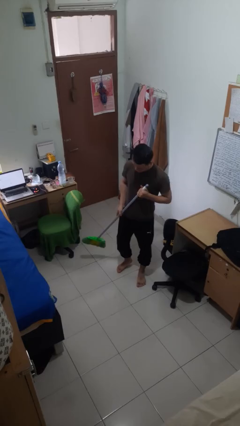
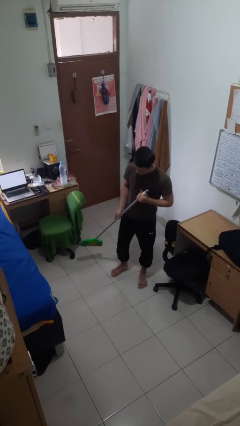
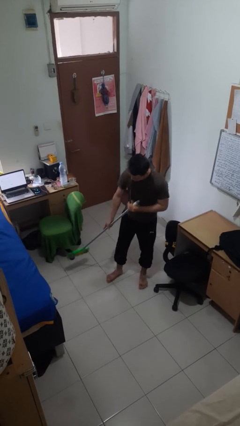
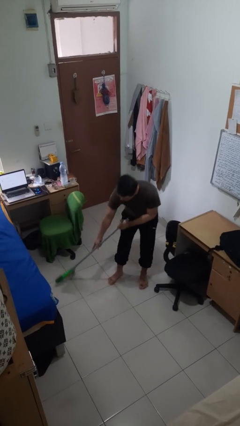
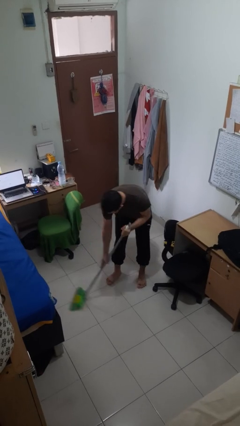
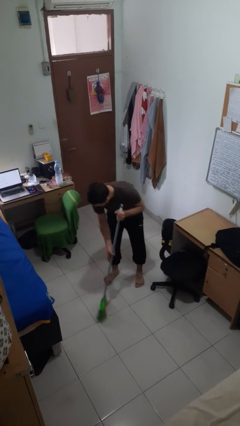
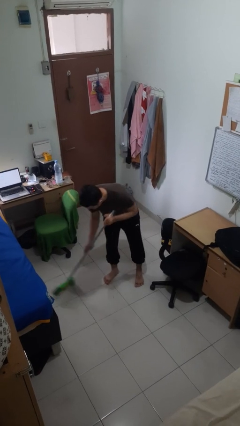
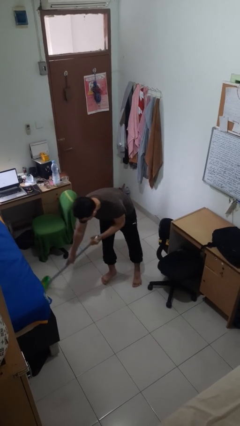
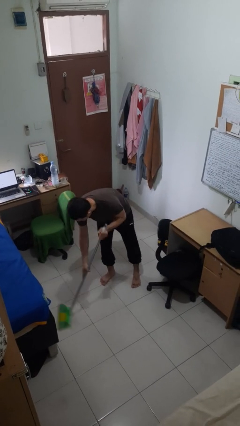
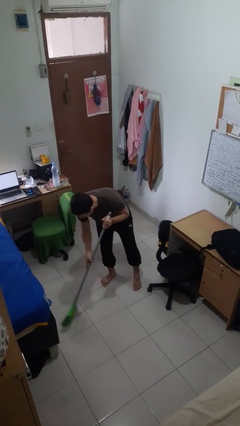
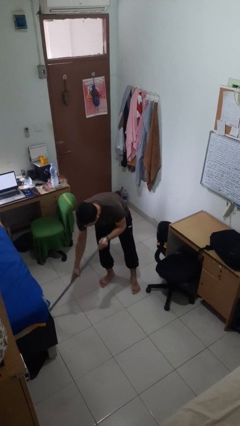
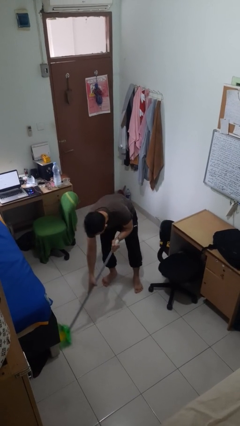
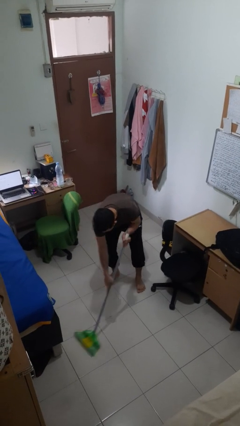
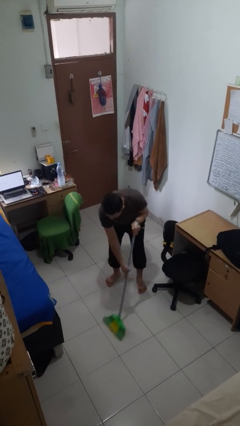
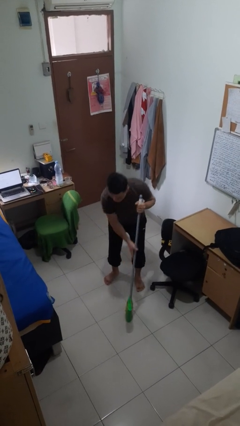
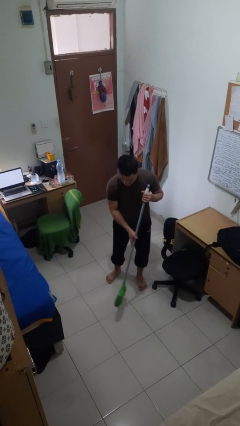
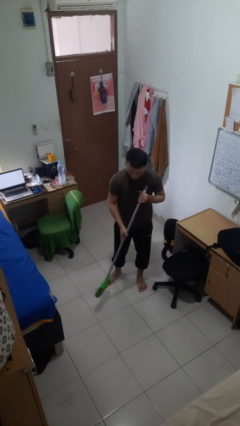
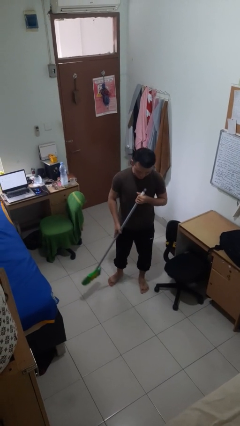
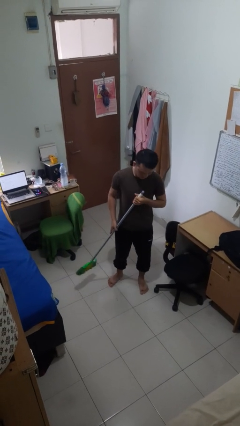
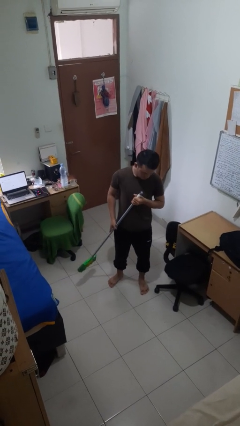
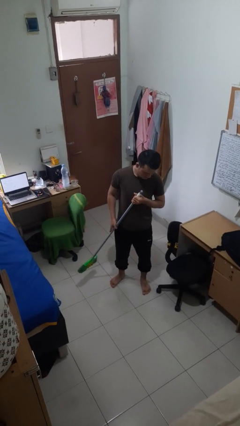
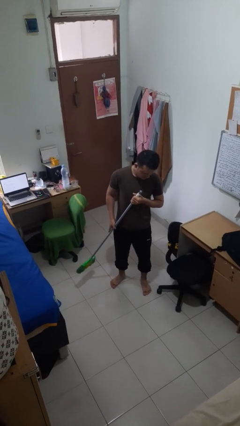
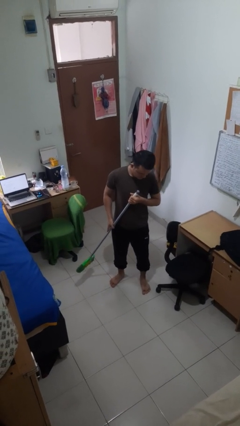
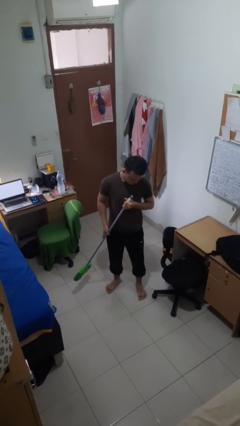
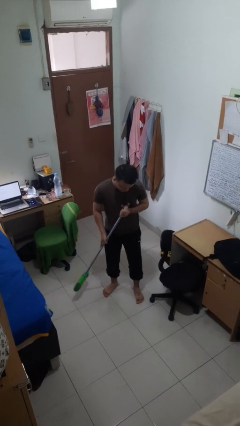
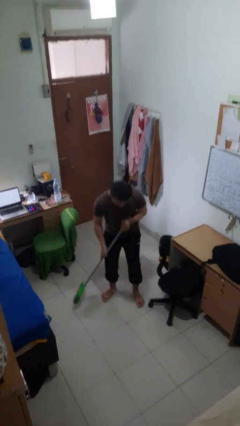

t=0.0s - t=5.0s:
person sweeps floor

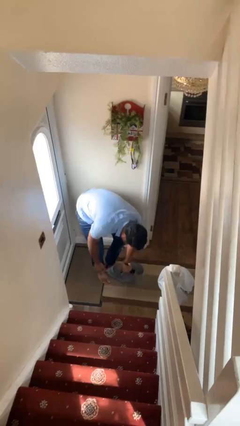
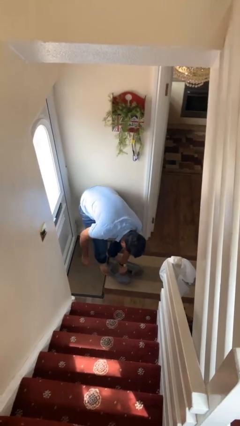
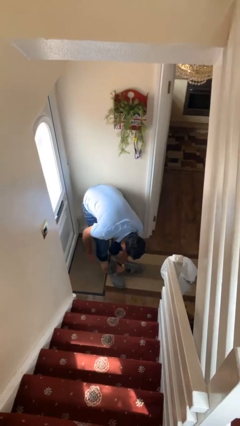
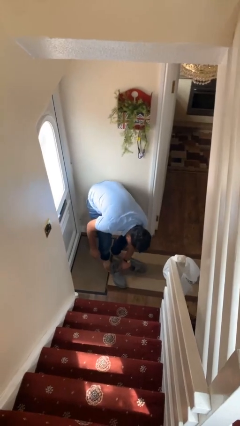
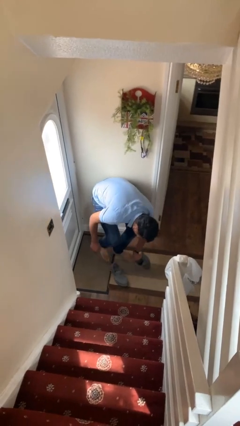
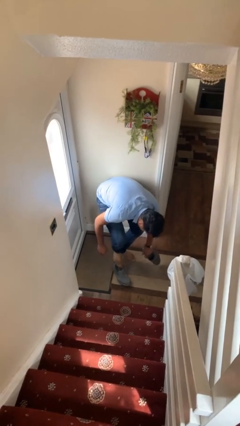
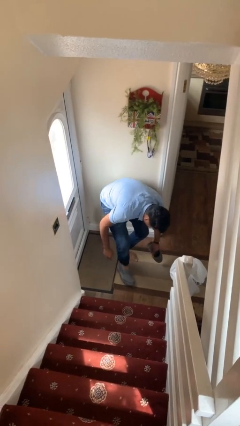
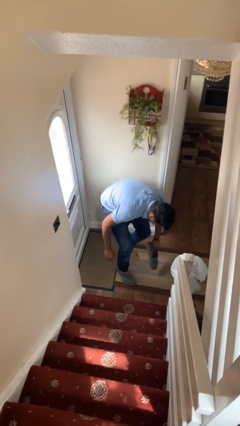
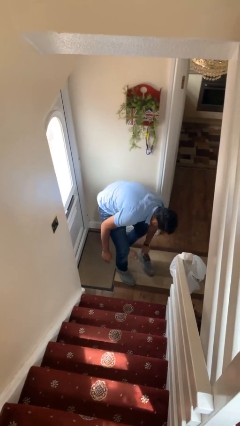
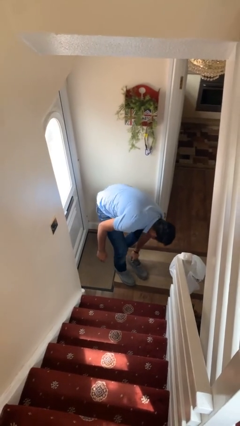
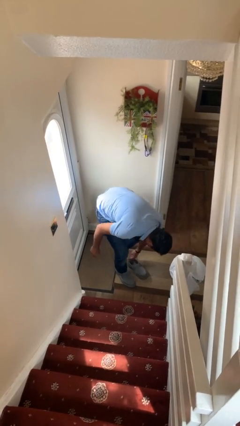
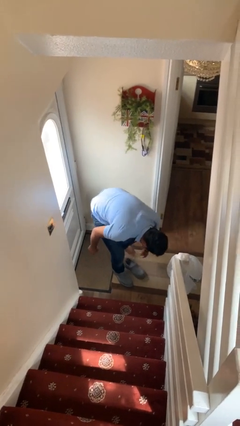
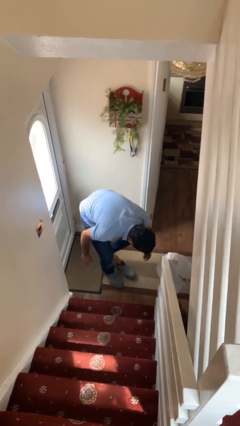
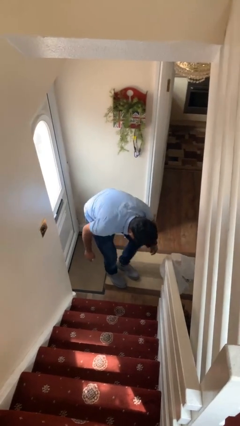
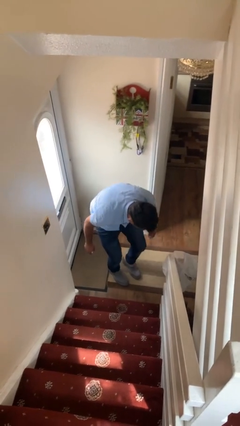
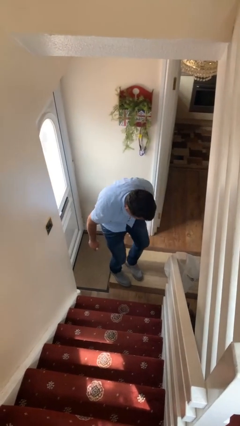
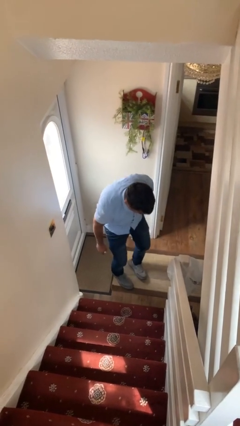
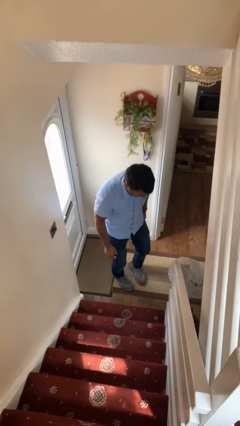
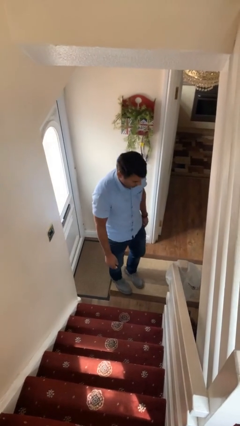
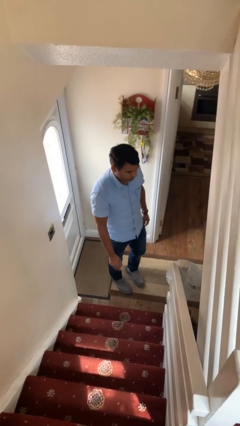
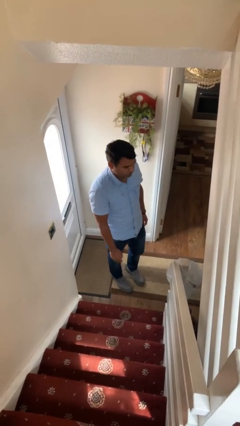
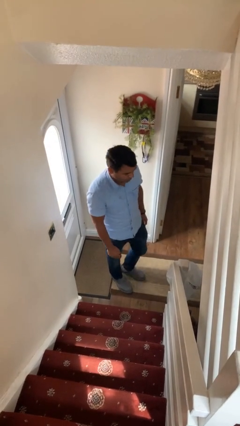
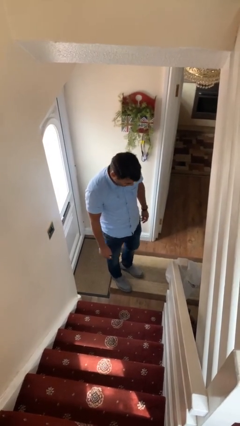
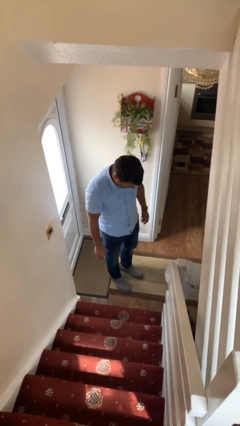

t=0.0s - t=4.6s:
person puts on shoes

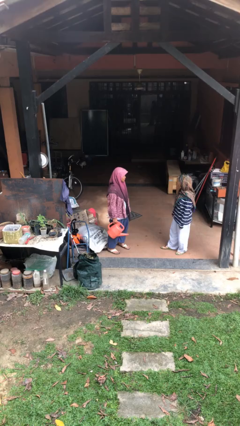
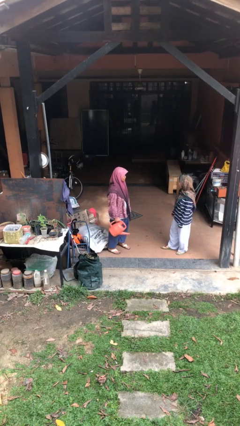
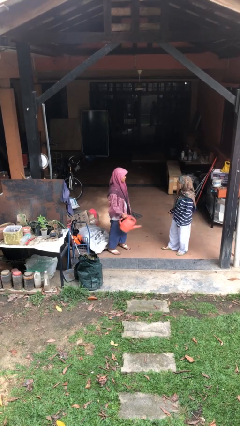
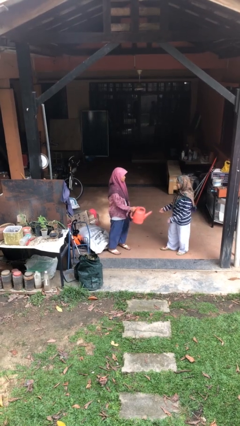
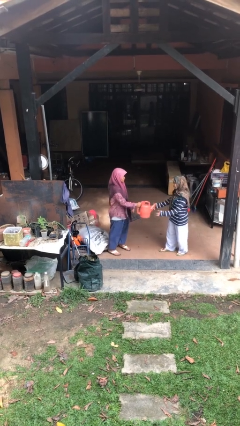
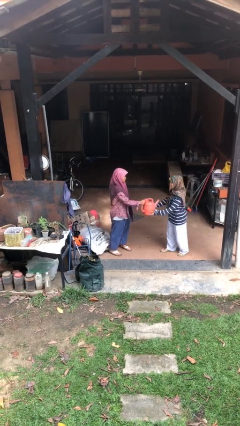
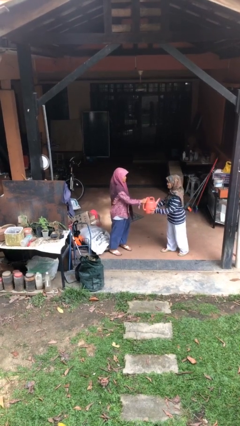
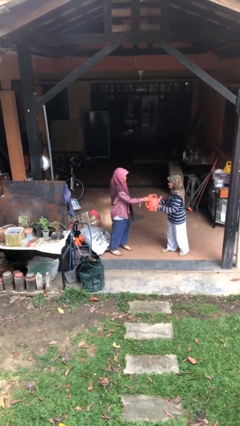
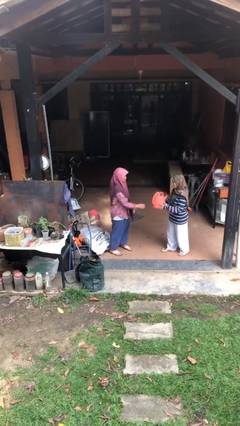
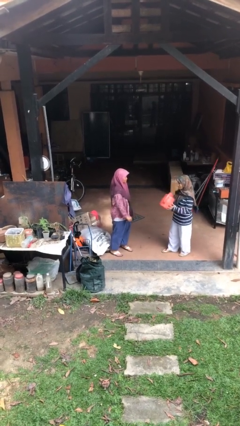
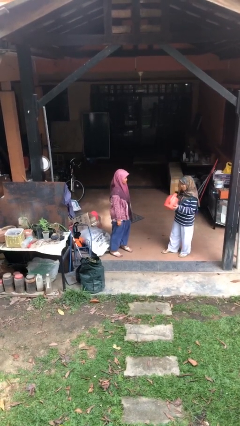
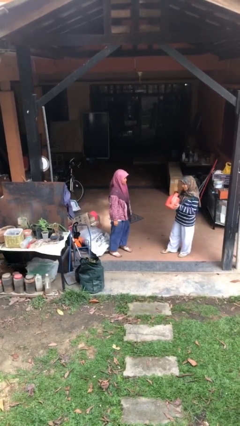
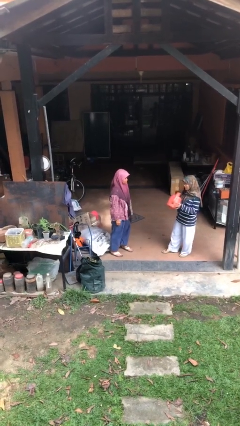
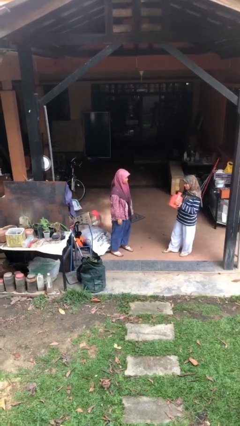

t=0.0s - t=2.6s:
person transfers object to person

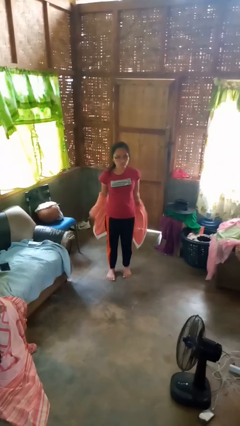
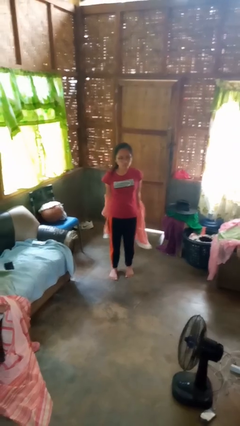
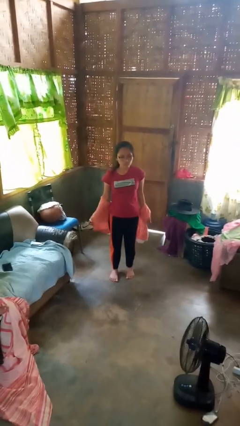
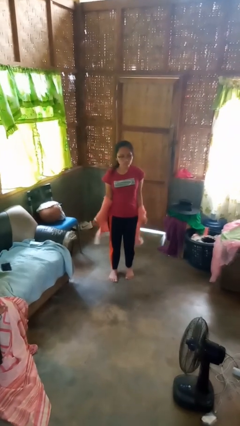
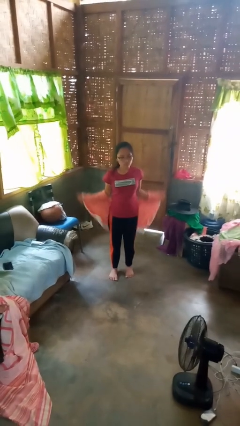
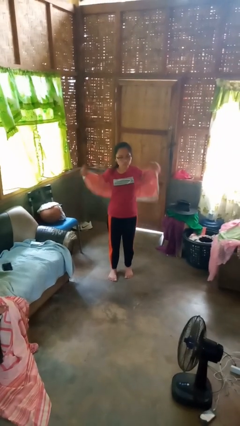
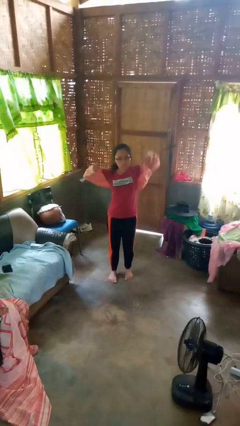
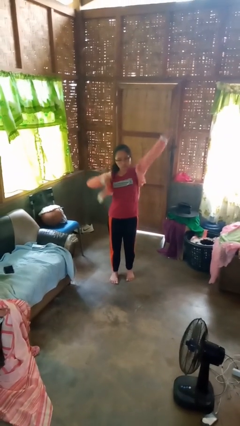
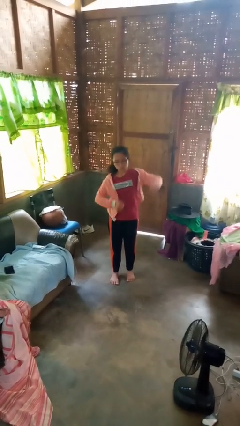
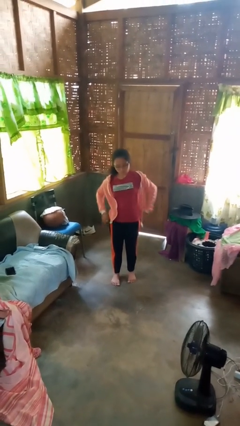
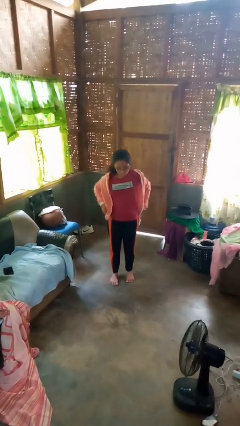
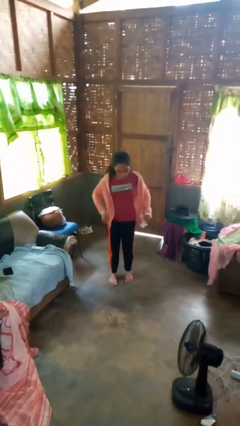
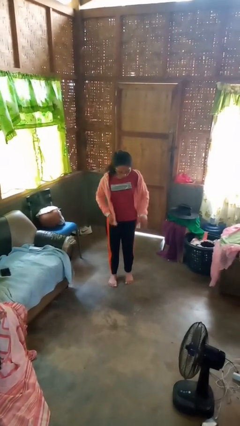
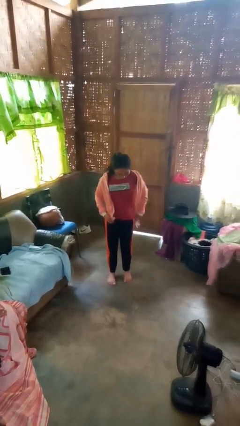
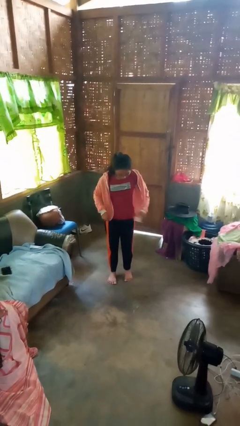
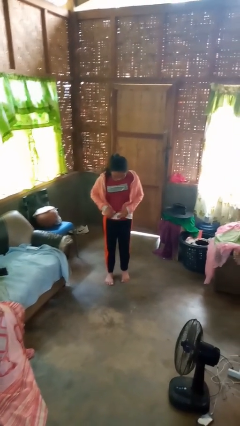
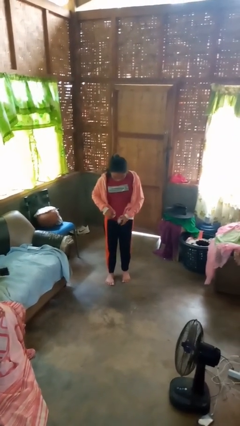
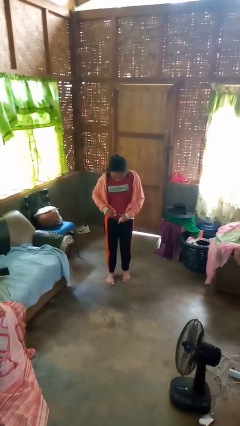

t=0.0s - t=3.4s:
person puts on jacket

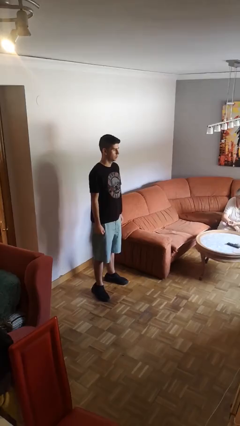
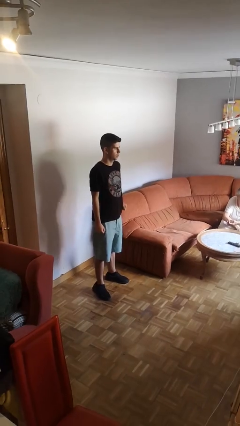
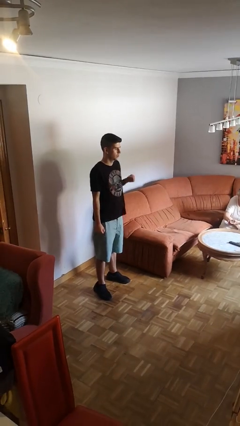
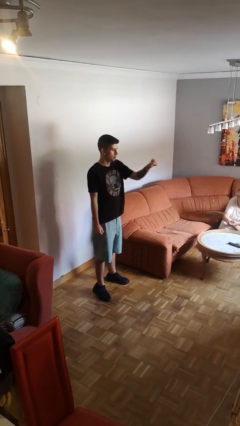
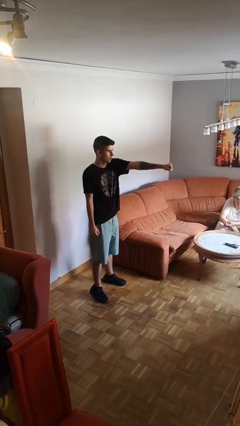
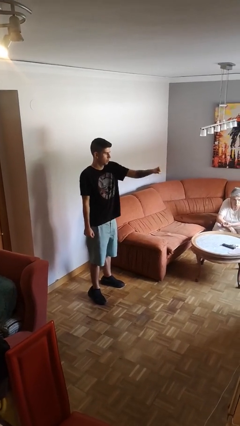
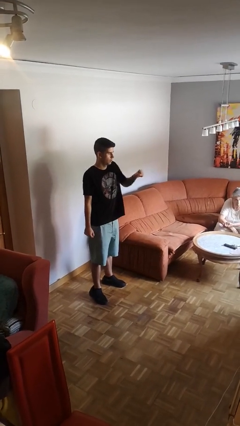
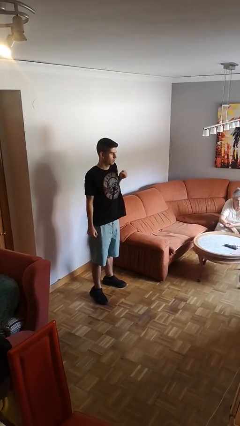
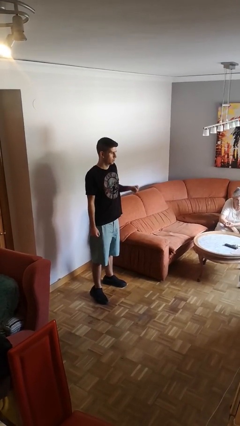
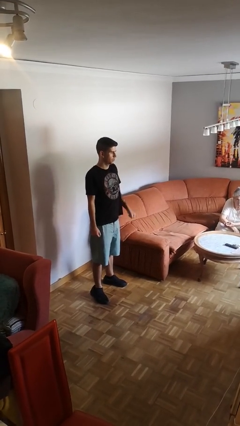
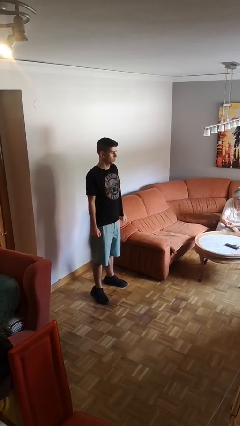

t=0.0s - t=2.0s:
person punches

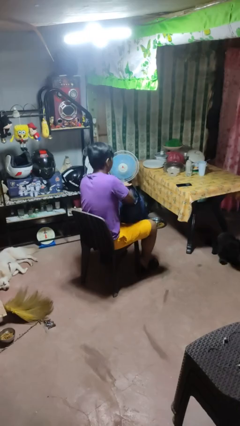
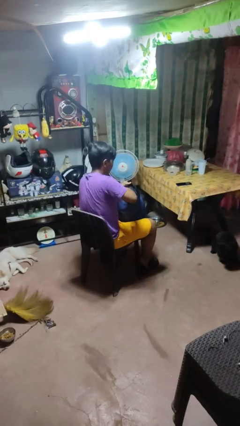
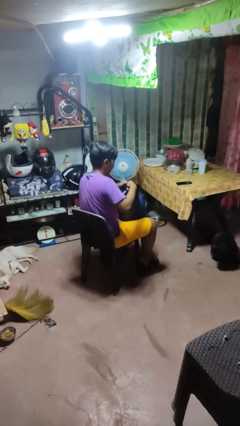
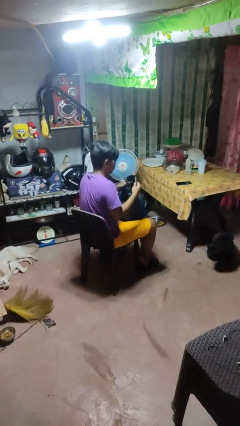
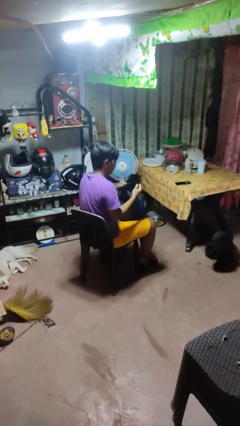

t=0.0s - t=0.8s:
person takes object from backpack
